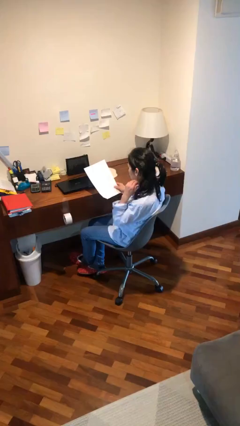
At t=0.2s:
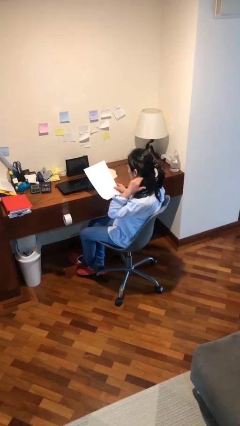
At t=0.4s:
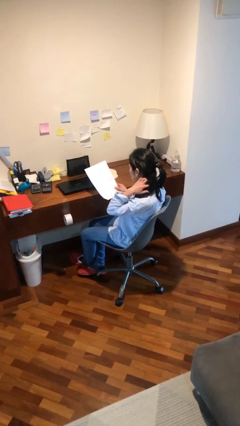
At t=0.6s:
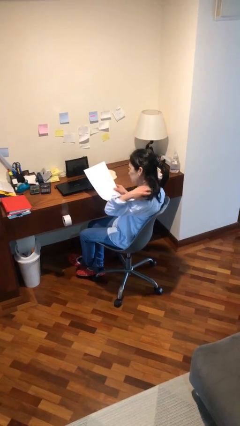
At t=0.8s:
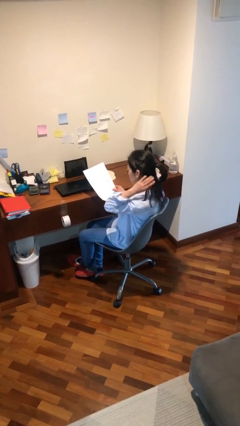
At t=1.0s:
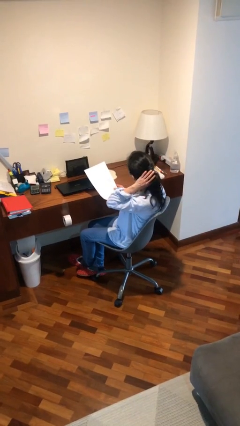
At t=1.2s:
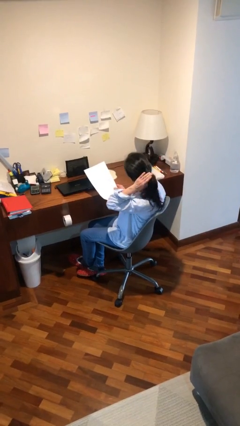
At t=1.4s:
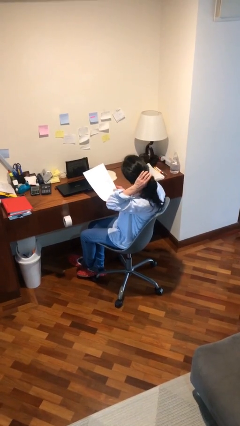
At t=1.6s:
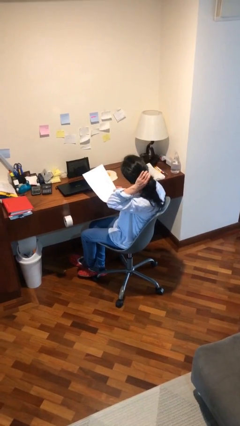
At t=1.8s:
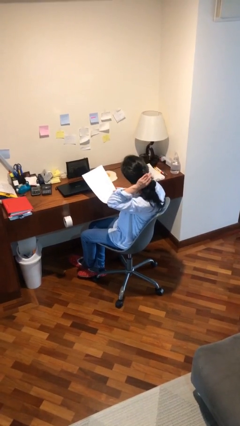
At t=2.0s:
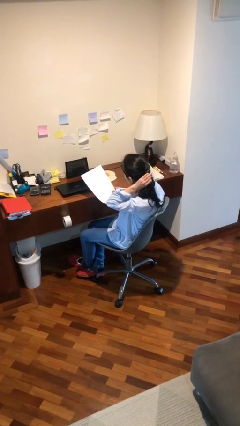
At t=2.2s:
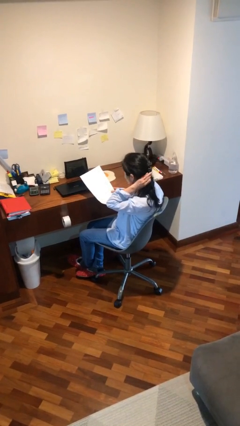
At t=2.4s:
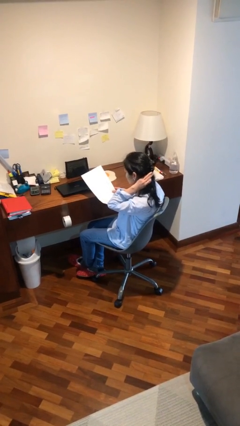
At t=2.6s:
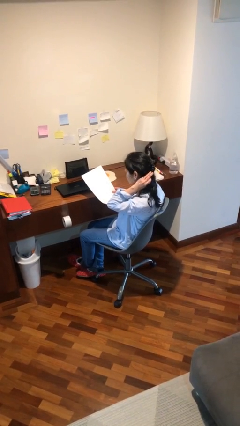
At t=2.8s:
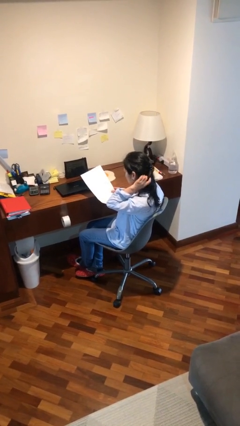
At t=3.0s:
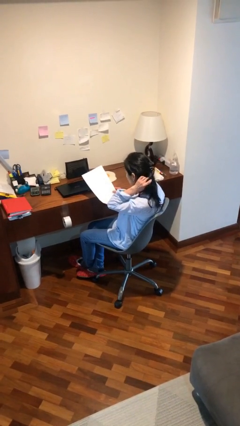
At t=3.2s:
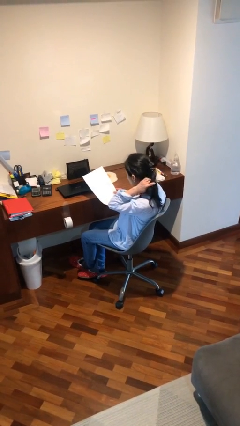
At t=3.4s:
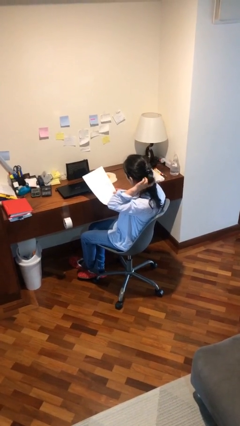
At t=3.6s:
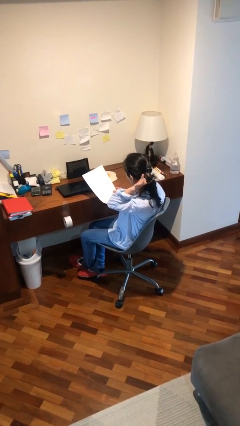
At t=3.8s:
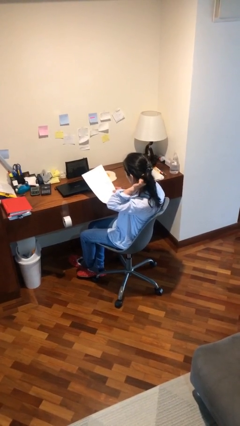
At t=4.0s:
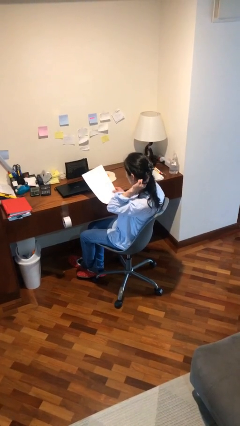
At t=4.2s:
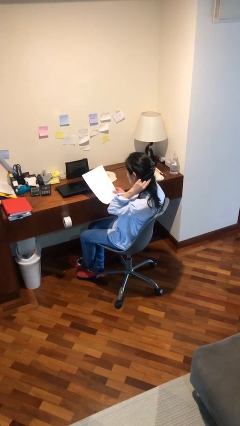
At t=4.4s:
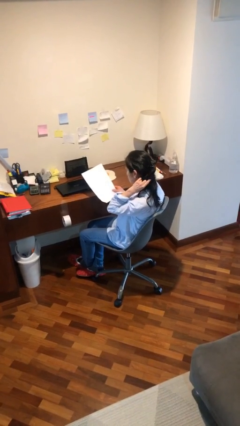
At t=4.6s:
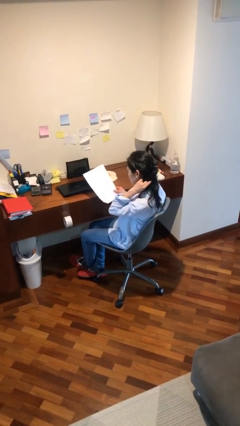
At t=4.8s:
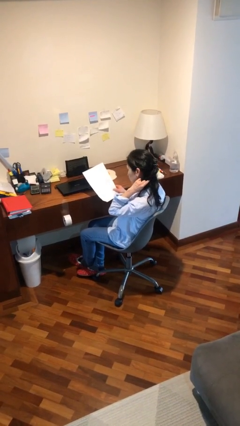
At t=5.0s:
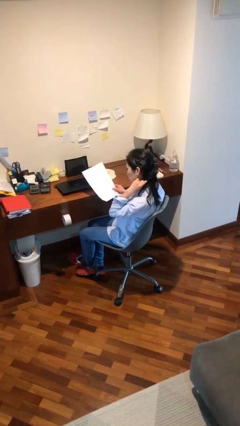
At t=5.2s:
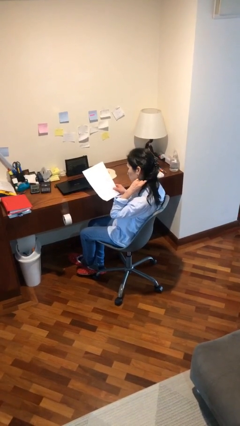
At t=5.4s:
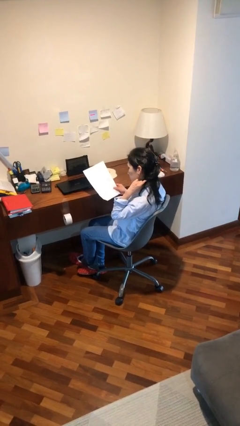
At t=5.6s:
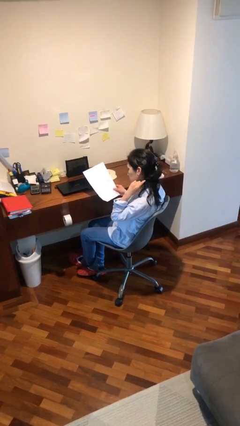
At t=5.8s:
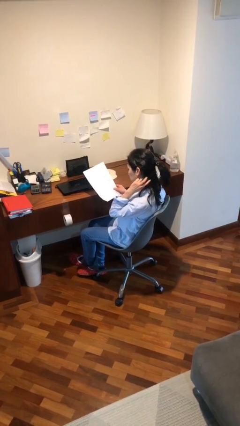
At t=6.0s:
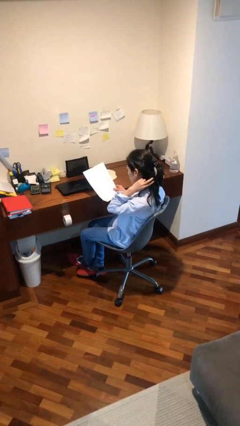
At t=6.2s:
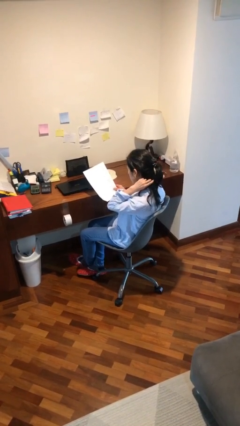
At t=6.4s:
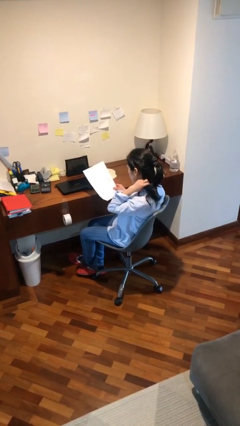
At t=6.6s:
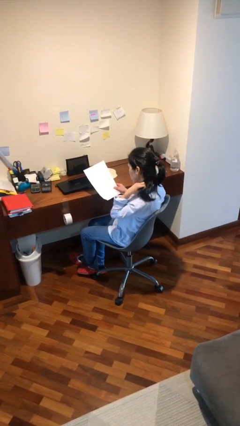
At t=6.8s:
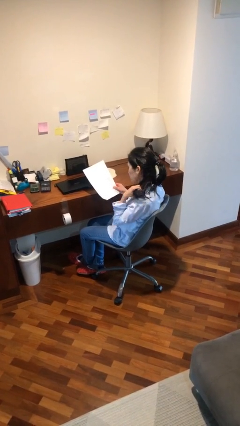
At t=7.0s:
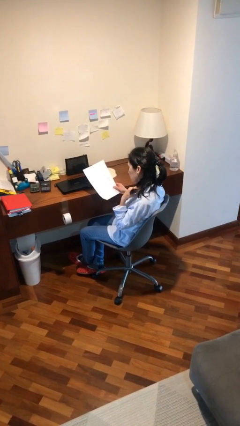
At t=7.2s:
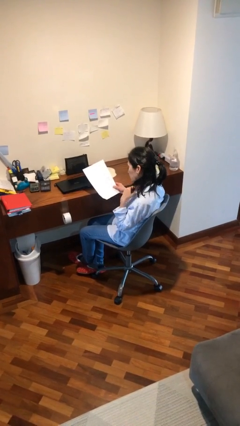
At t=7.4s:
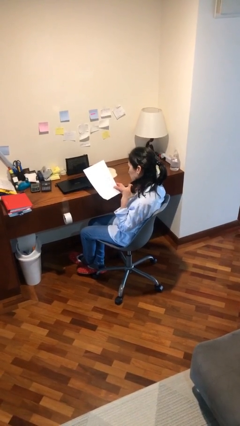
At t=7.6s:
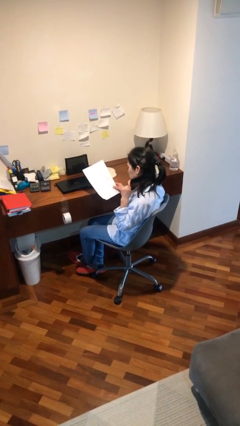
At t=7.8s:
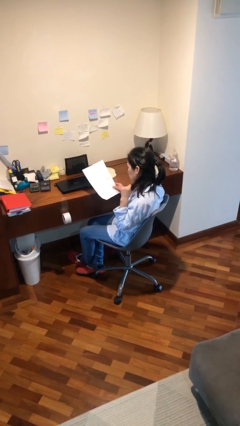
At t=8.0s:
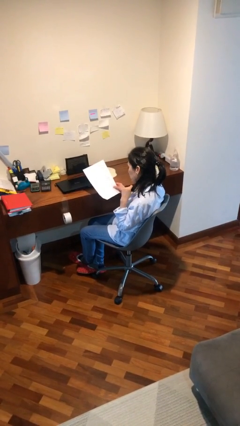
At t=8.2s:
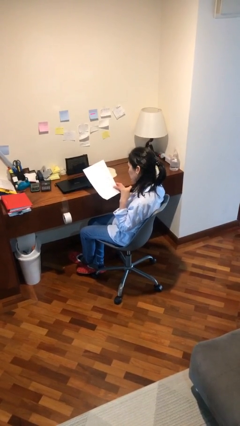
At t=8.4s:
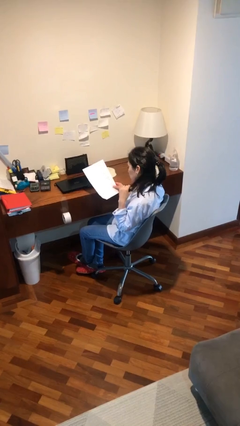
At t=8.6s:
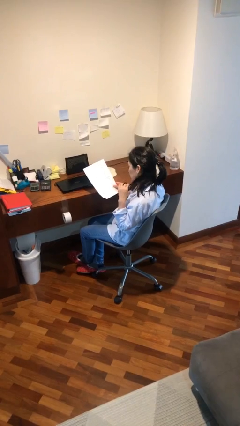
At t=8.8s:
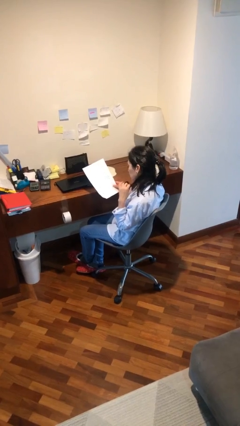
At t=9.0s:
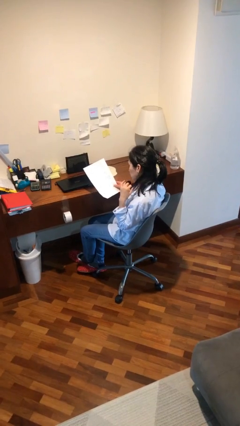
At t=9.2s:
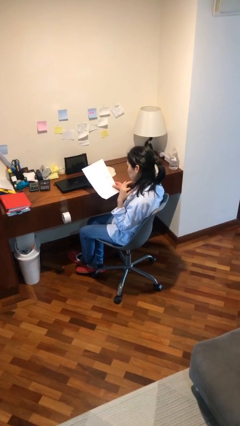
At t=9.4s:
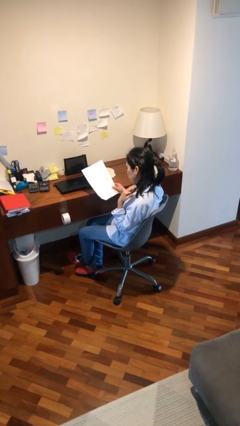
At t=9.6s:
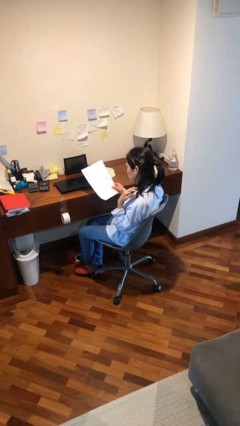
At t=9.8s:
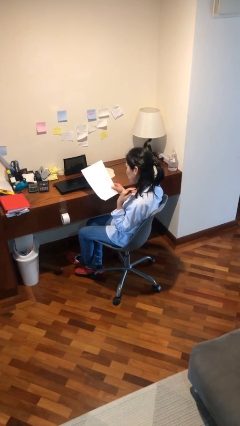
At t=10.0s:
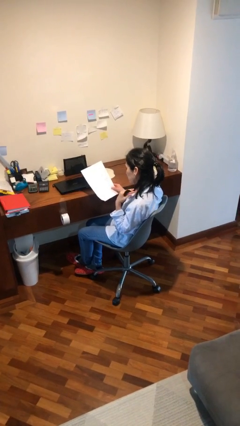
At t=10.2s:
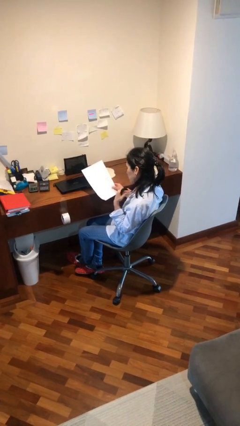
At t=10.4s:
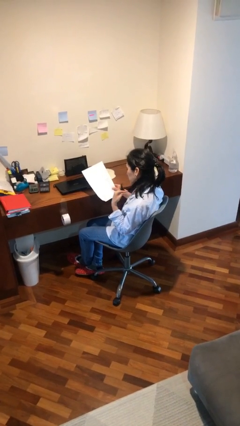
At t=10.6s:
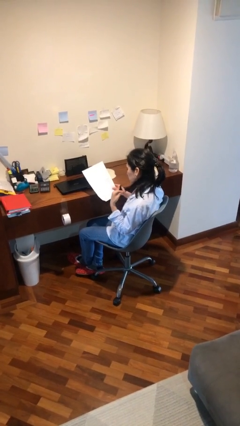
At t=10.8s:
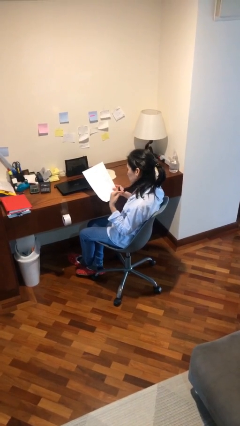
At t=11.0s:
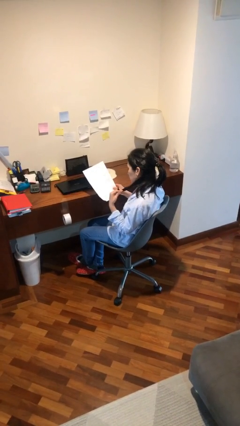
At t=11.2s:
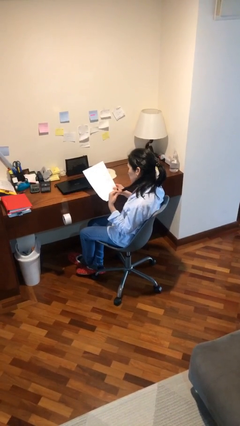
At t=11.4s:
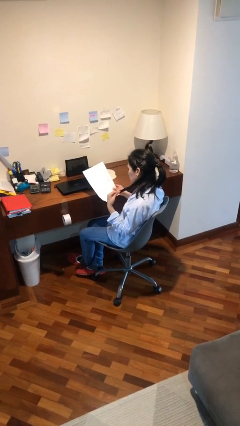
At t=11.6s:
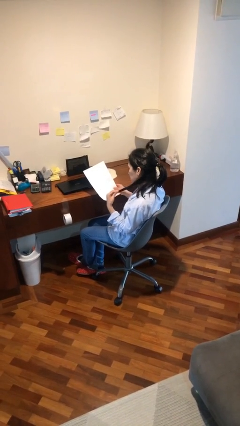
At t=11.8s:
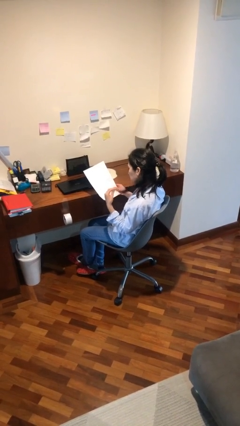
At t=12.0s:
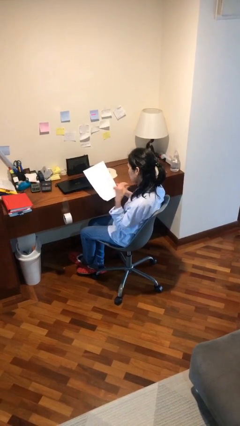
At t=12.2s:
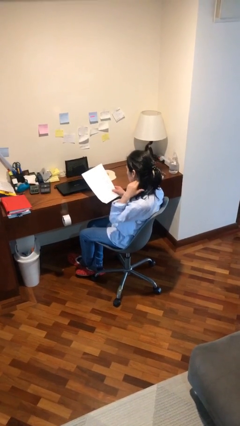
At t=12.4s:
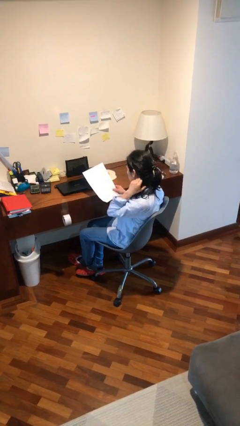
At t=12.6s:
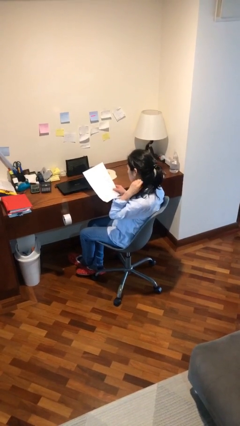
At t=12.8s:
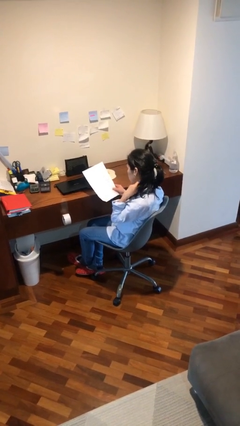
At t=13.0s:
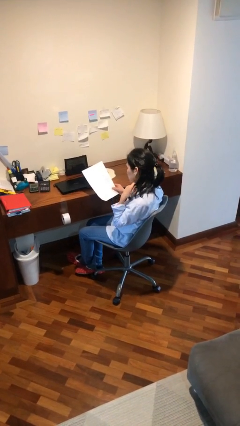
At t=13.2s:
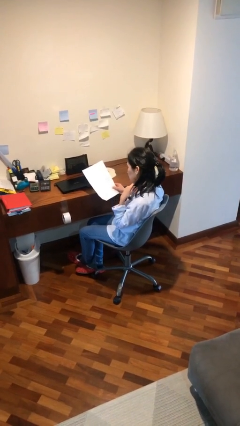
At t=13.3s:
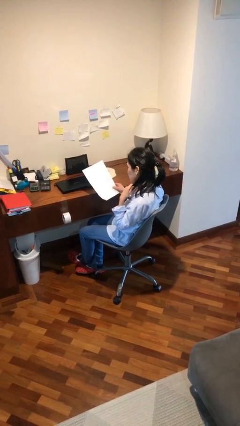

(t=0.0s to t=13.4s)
person reads document

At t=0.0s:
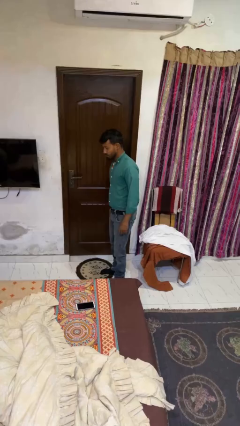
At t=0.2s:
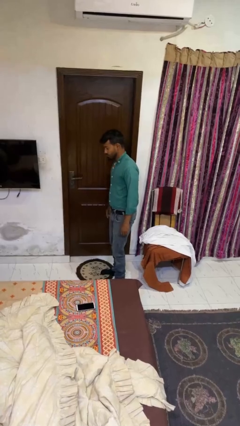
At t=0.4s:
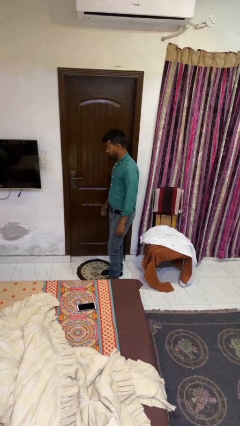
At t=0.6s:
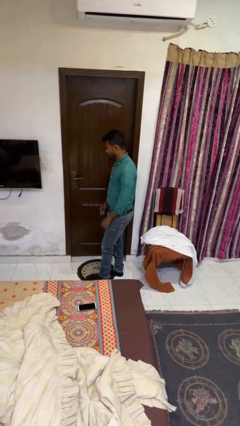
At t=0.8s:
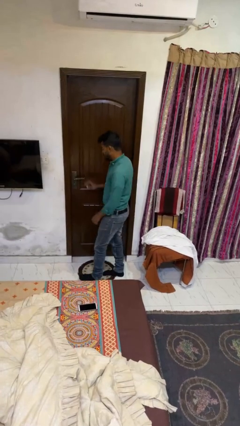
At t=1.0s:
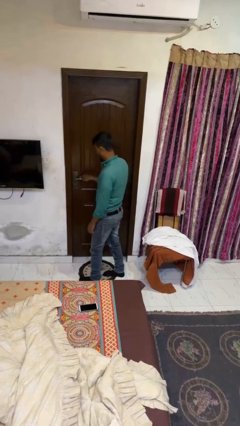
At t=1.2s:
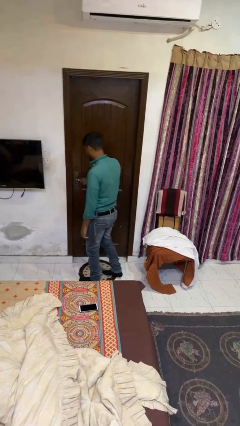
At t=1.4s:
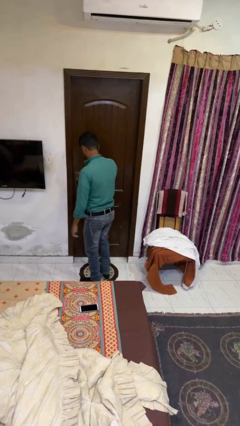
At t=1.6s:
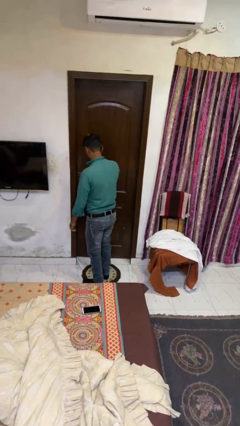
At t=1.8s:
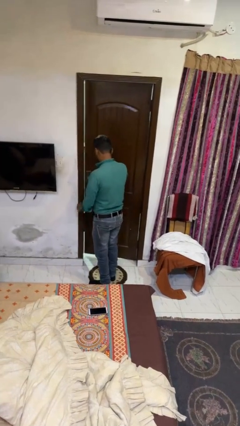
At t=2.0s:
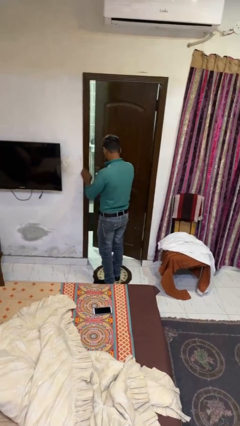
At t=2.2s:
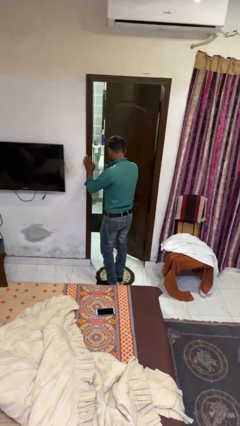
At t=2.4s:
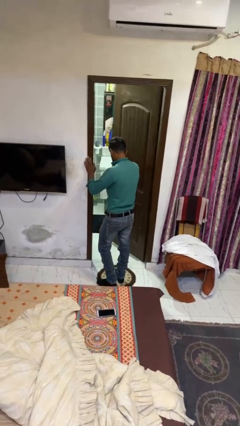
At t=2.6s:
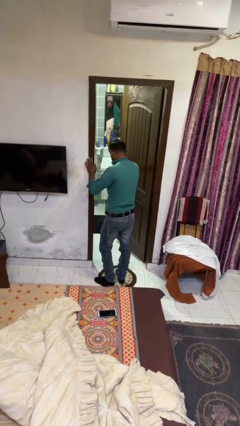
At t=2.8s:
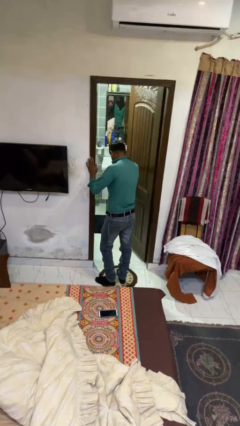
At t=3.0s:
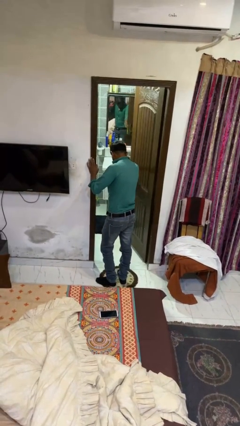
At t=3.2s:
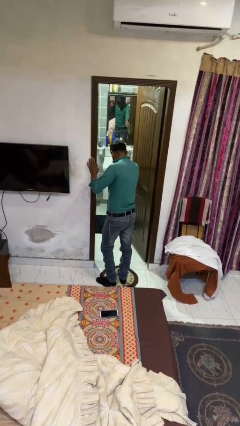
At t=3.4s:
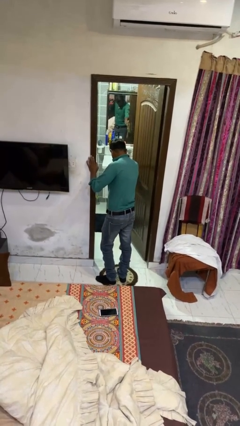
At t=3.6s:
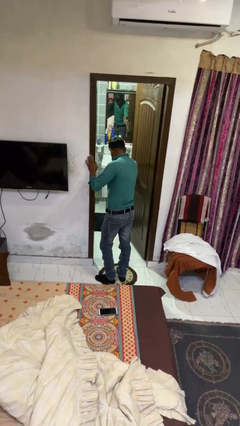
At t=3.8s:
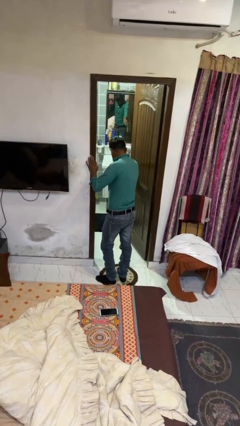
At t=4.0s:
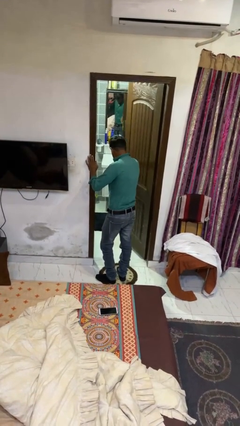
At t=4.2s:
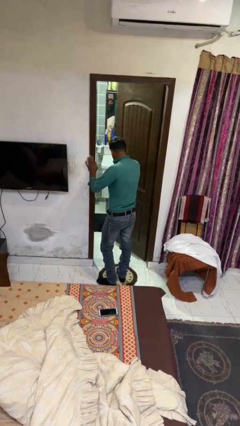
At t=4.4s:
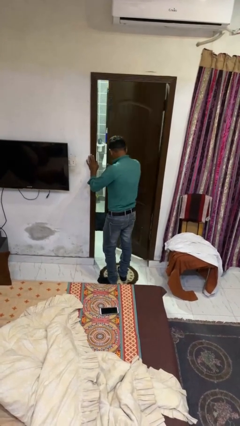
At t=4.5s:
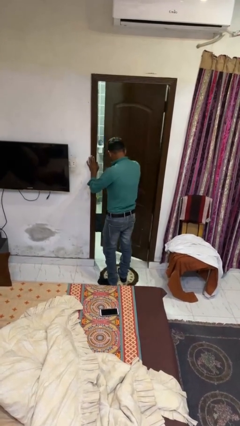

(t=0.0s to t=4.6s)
person opens facility door
